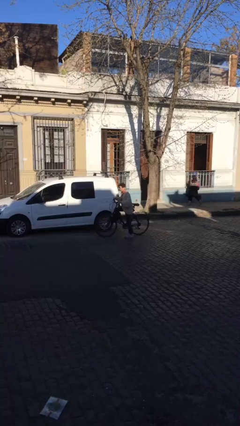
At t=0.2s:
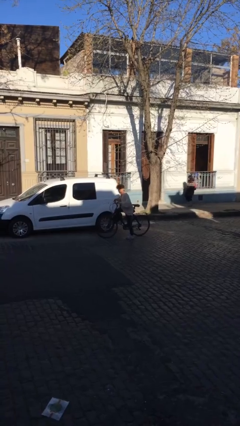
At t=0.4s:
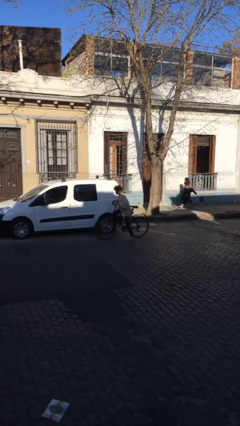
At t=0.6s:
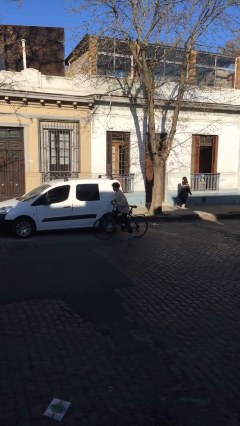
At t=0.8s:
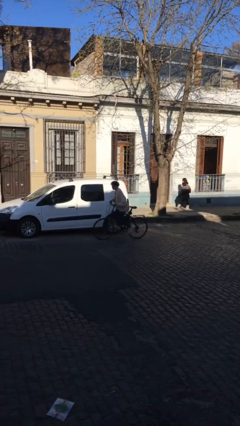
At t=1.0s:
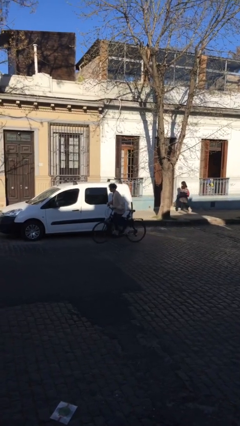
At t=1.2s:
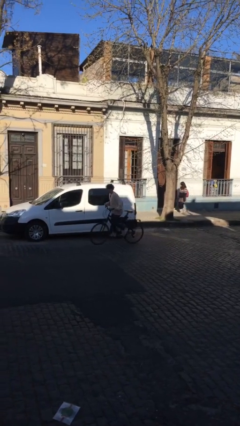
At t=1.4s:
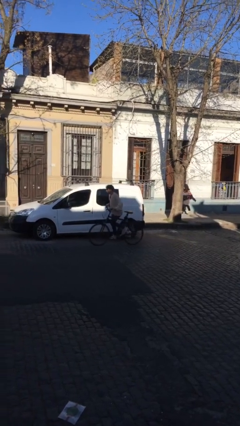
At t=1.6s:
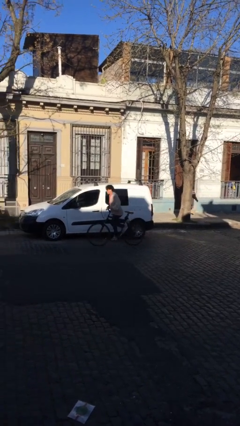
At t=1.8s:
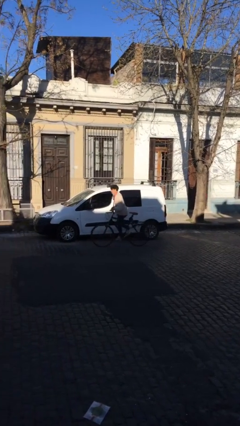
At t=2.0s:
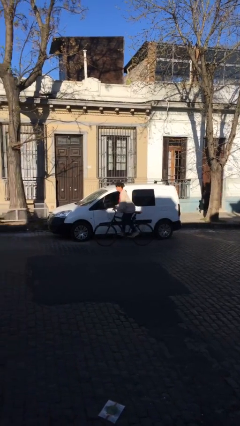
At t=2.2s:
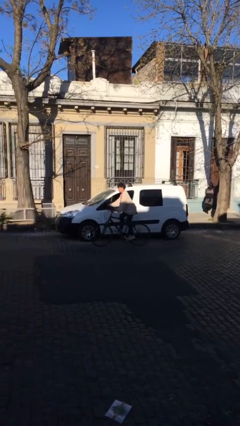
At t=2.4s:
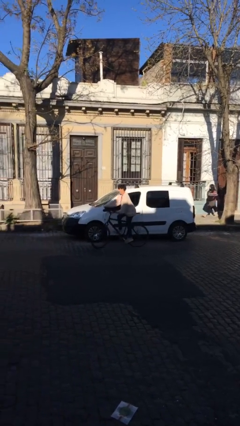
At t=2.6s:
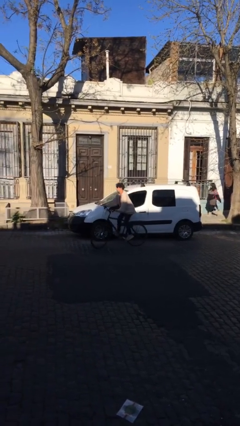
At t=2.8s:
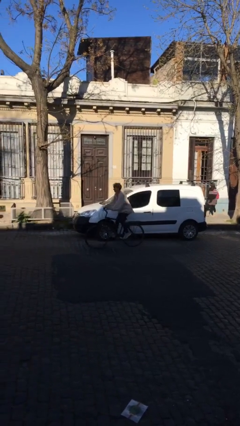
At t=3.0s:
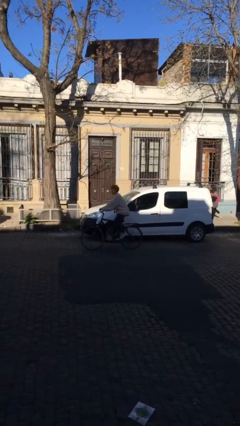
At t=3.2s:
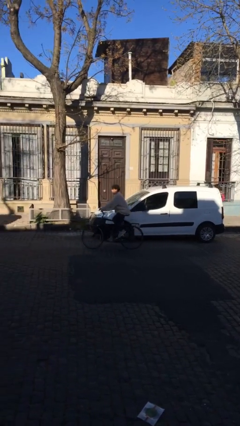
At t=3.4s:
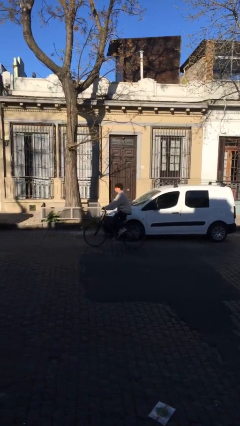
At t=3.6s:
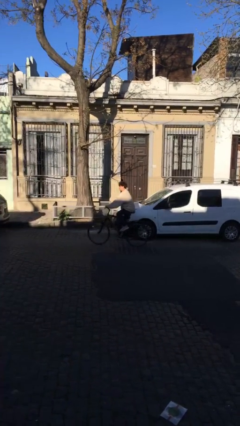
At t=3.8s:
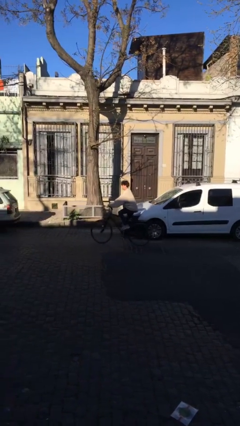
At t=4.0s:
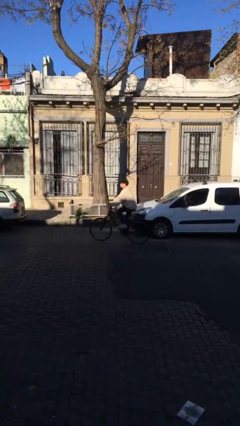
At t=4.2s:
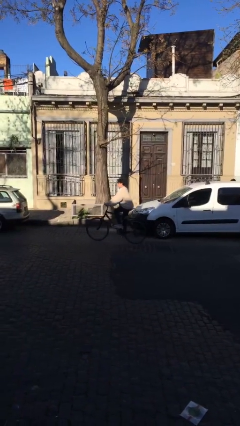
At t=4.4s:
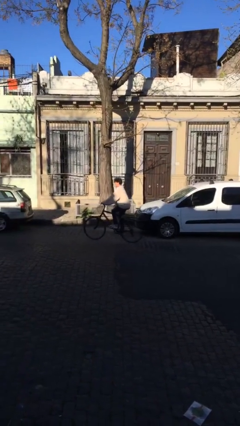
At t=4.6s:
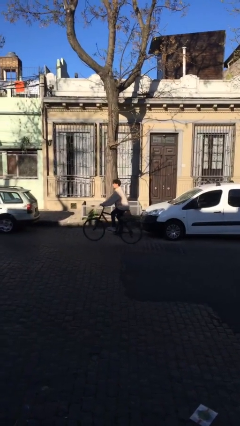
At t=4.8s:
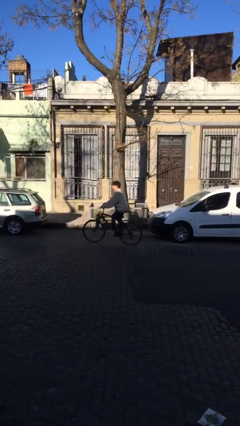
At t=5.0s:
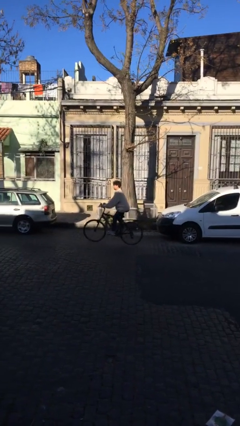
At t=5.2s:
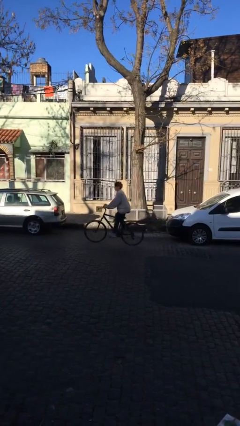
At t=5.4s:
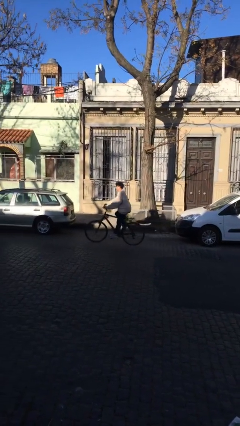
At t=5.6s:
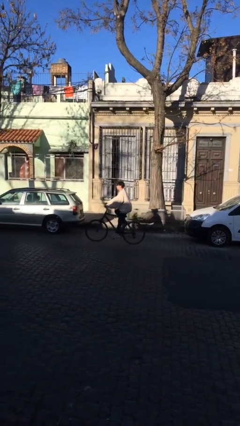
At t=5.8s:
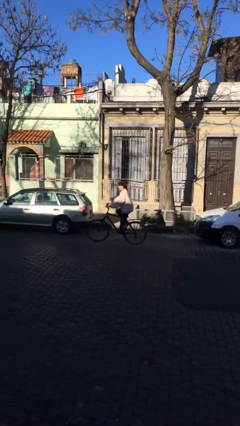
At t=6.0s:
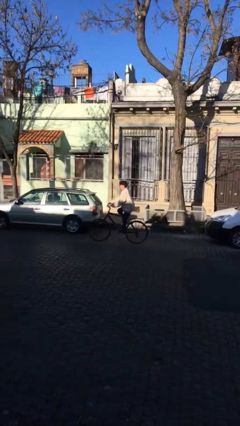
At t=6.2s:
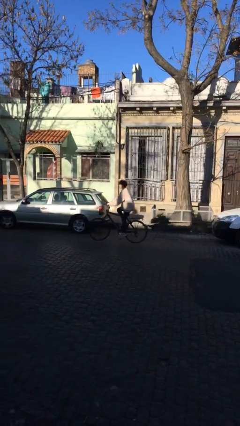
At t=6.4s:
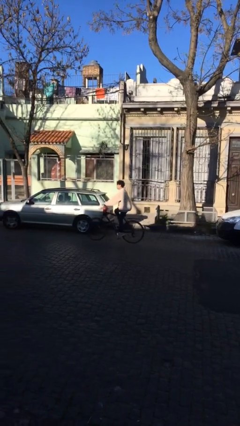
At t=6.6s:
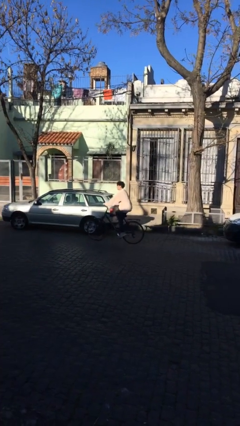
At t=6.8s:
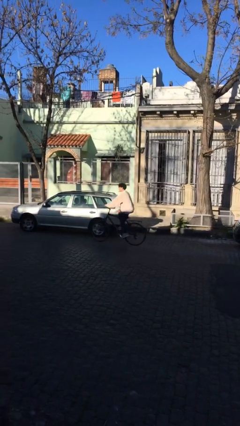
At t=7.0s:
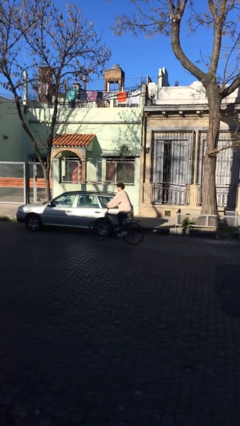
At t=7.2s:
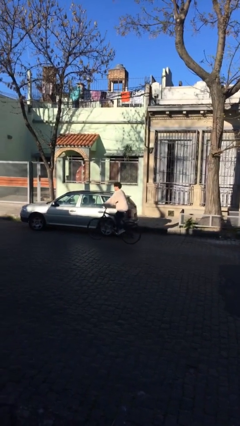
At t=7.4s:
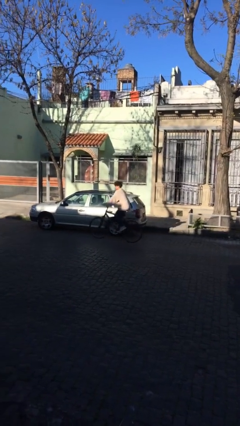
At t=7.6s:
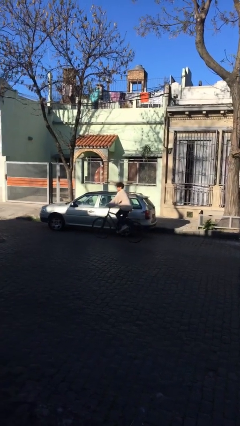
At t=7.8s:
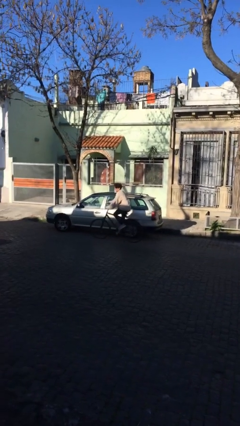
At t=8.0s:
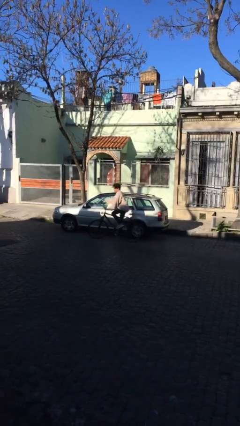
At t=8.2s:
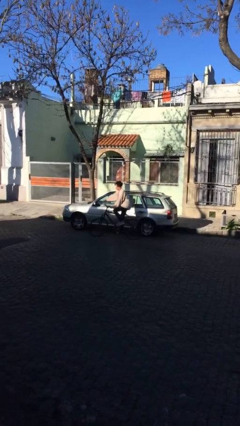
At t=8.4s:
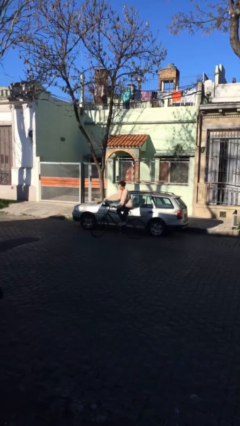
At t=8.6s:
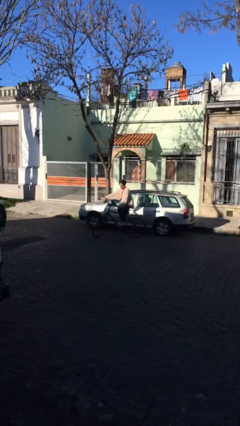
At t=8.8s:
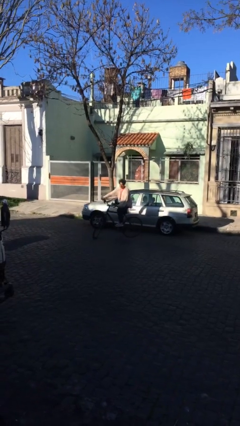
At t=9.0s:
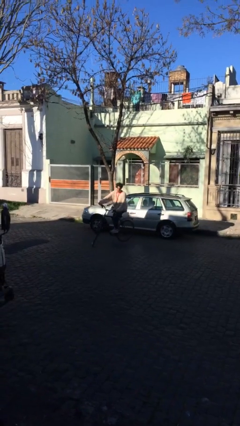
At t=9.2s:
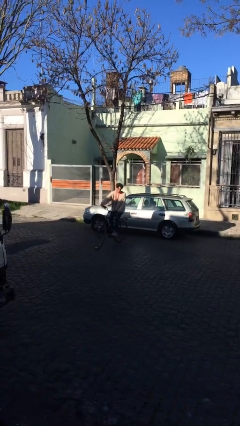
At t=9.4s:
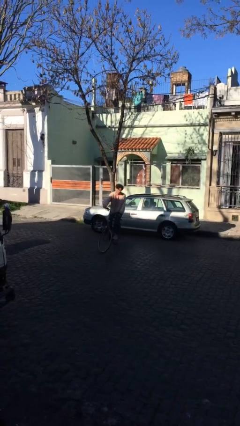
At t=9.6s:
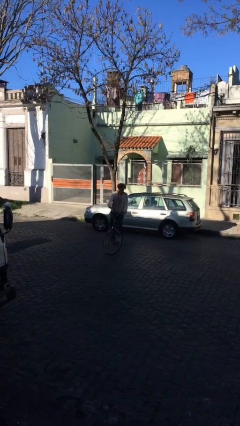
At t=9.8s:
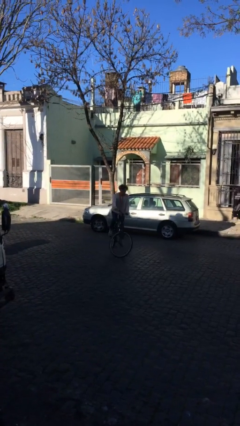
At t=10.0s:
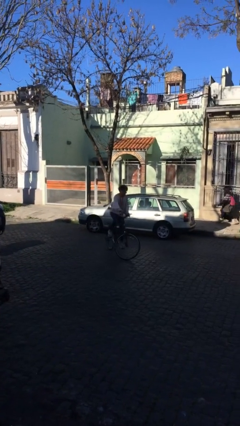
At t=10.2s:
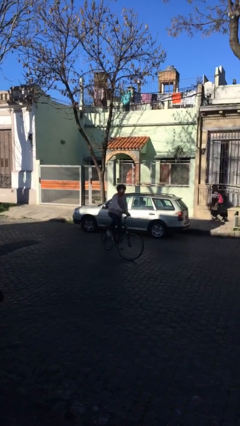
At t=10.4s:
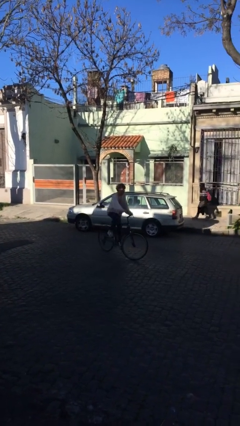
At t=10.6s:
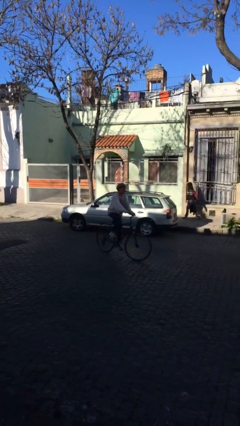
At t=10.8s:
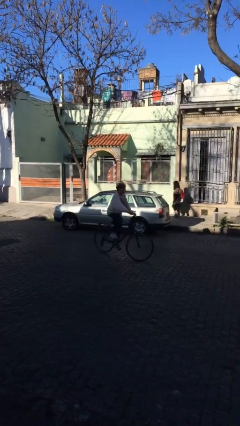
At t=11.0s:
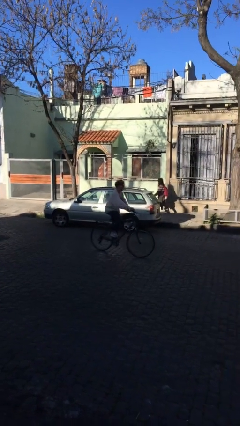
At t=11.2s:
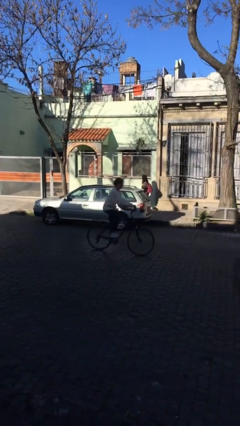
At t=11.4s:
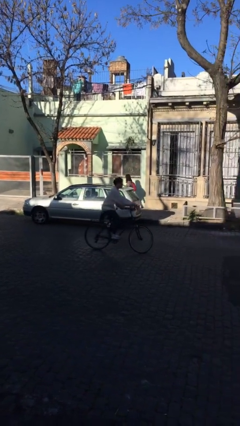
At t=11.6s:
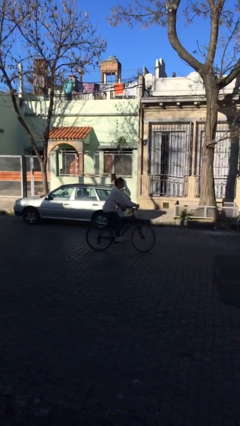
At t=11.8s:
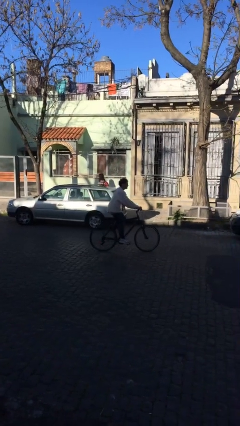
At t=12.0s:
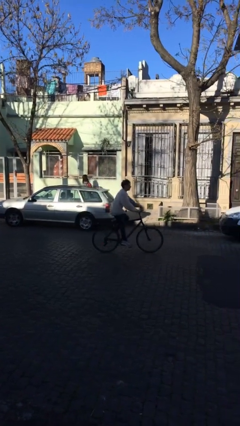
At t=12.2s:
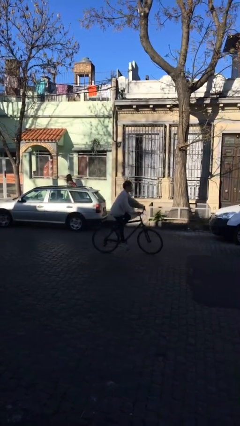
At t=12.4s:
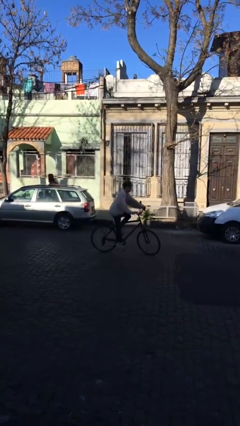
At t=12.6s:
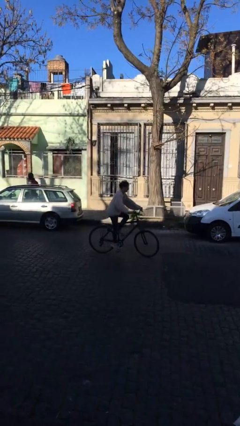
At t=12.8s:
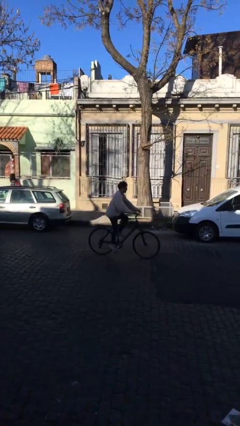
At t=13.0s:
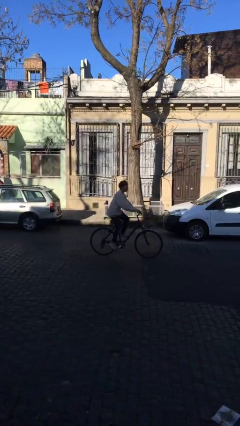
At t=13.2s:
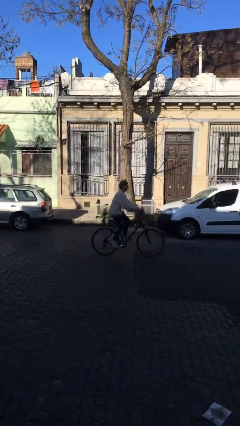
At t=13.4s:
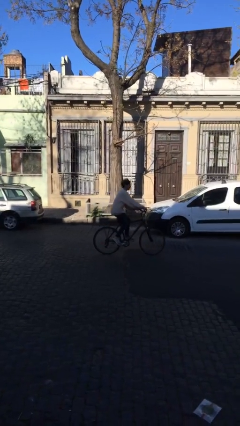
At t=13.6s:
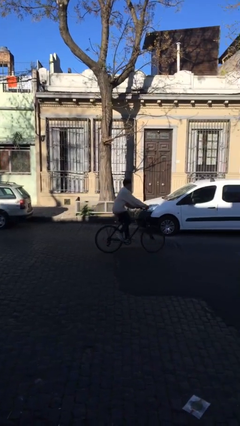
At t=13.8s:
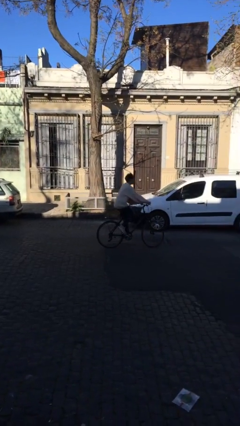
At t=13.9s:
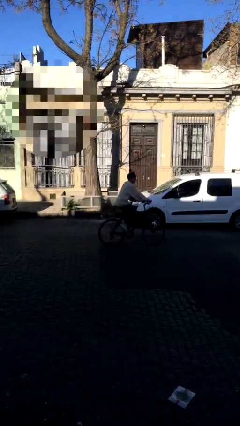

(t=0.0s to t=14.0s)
person rides bicycle

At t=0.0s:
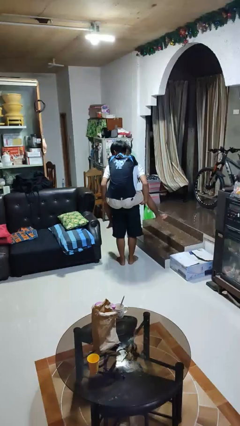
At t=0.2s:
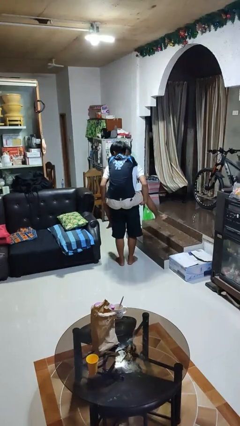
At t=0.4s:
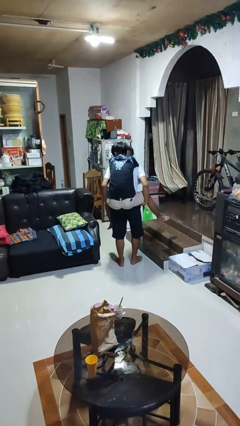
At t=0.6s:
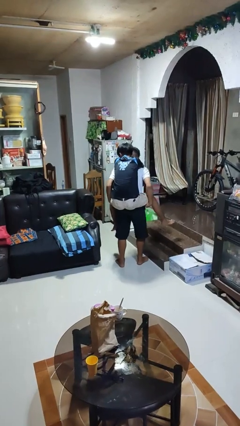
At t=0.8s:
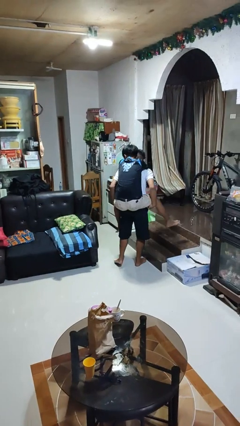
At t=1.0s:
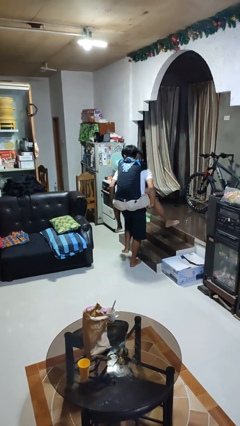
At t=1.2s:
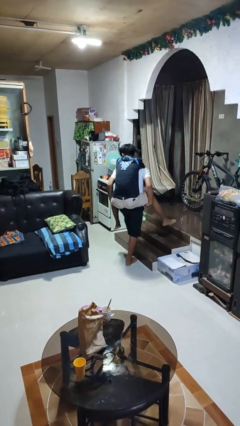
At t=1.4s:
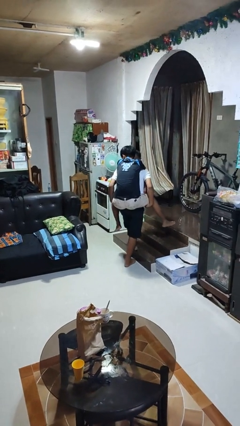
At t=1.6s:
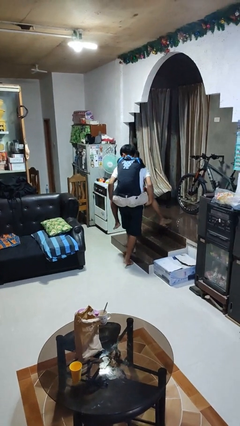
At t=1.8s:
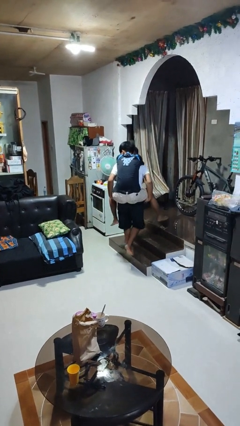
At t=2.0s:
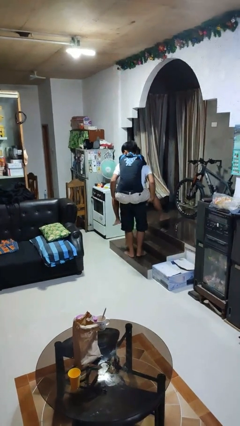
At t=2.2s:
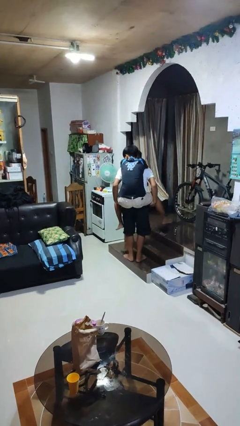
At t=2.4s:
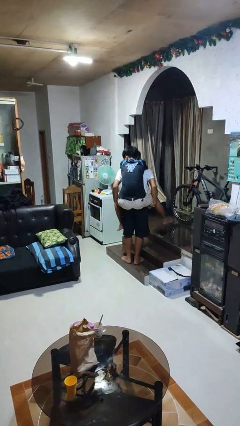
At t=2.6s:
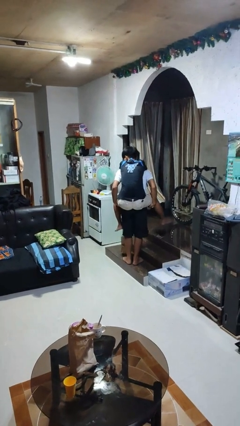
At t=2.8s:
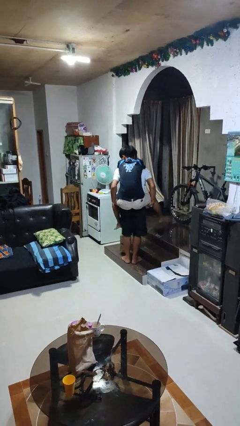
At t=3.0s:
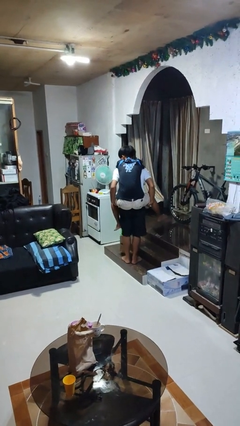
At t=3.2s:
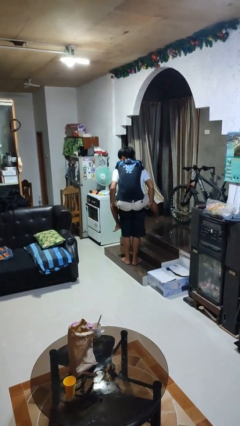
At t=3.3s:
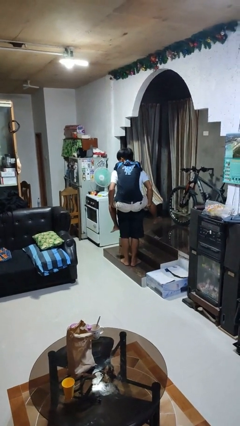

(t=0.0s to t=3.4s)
person carries person on back

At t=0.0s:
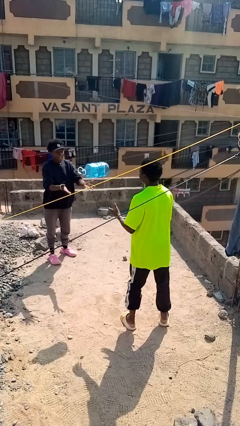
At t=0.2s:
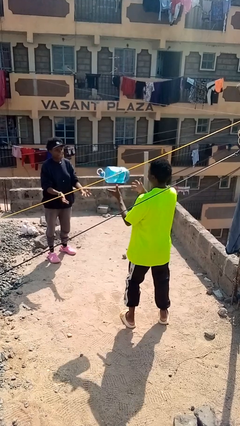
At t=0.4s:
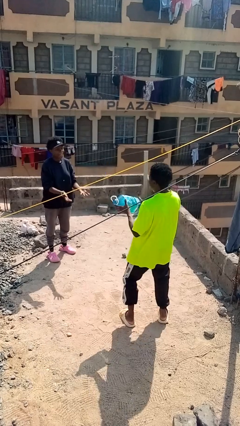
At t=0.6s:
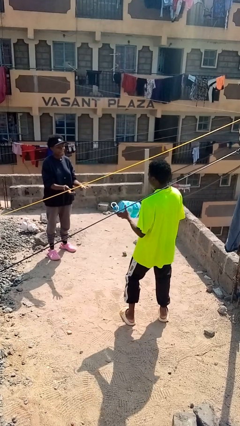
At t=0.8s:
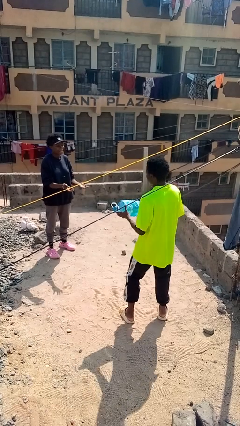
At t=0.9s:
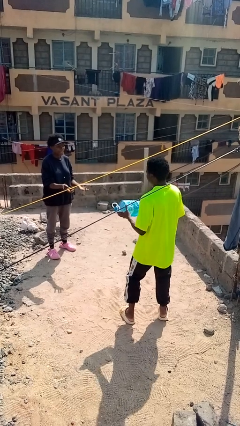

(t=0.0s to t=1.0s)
person catches object from person
